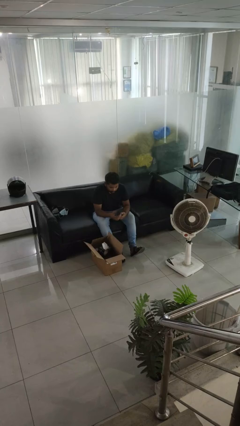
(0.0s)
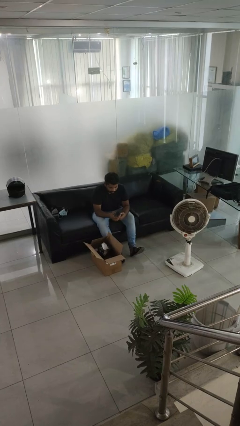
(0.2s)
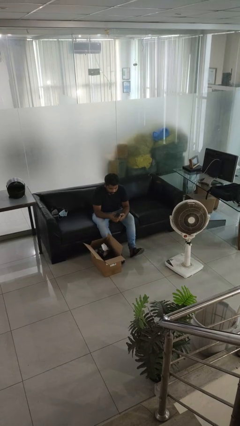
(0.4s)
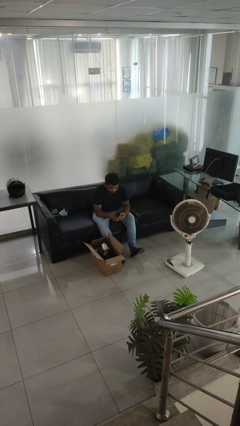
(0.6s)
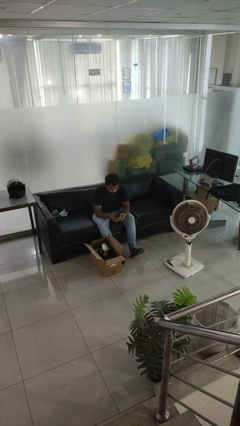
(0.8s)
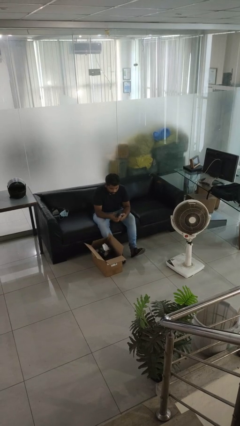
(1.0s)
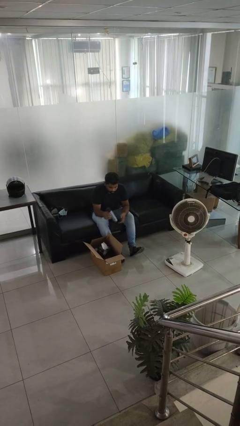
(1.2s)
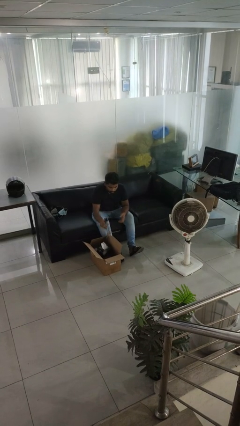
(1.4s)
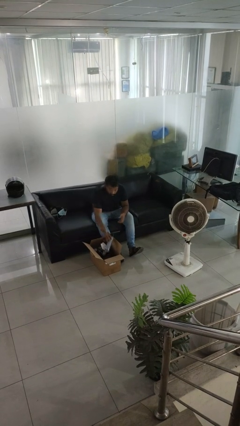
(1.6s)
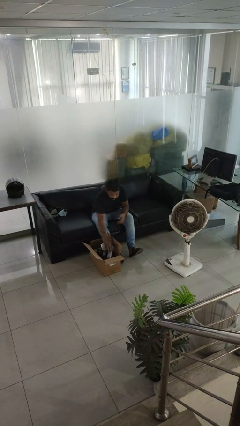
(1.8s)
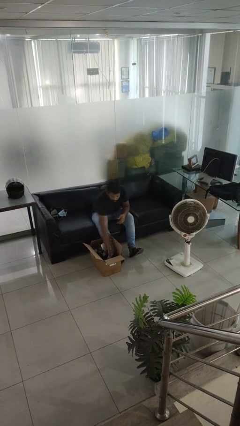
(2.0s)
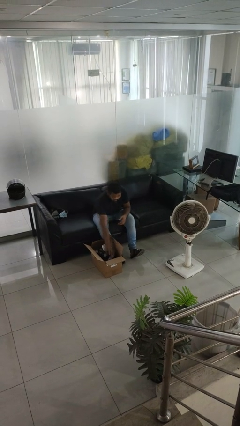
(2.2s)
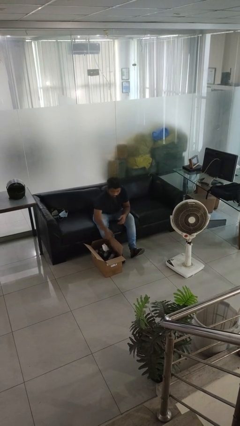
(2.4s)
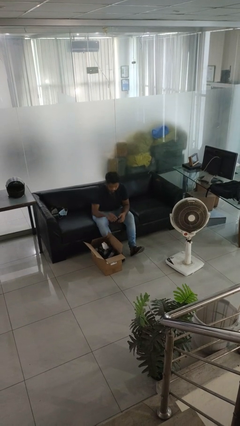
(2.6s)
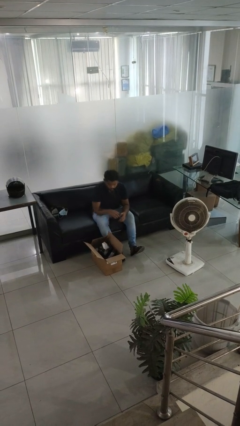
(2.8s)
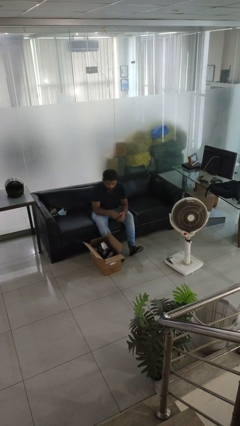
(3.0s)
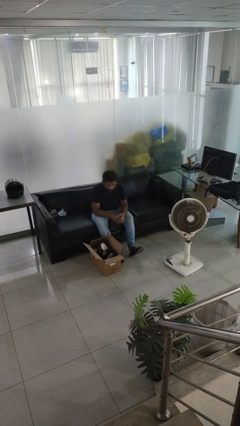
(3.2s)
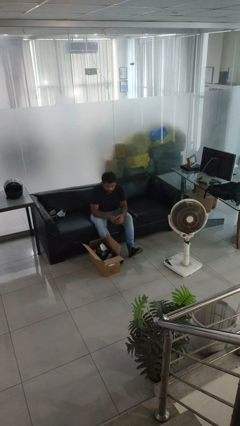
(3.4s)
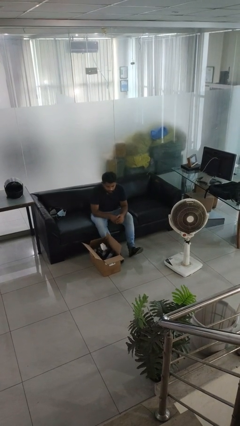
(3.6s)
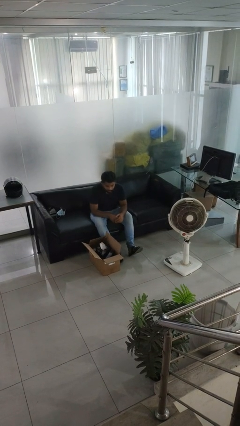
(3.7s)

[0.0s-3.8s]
person puts object into box

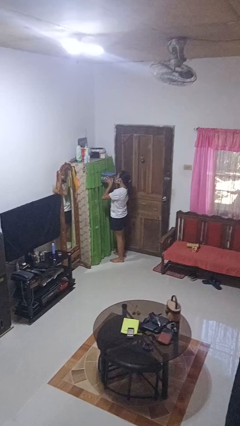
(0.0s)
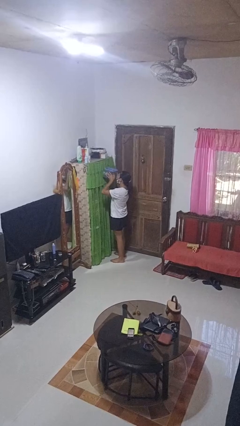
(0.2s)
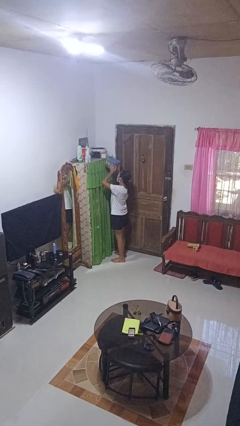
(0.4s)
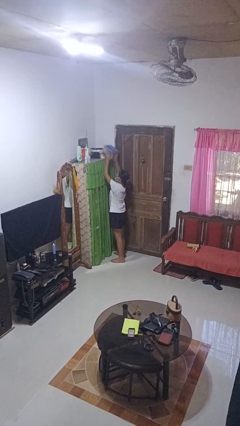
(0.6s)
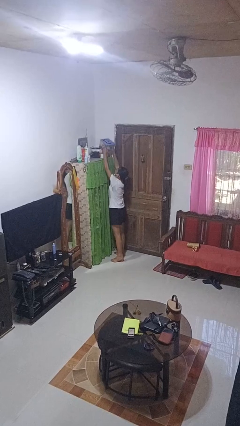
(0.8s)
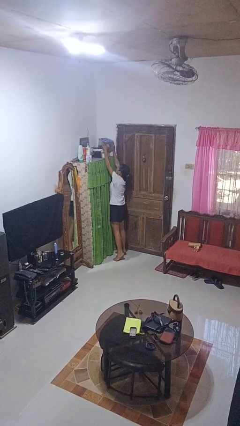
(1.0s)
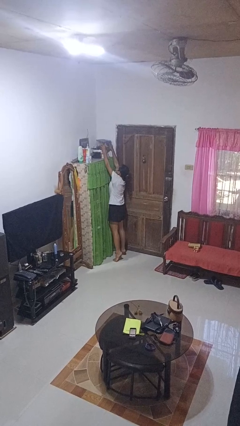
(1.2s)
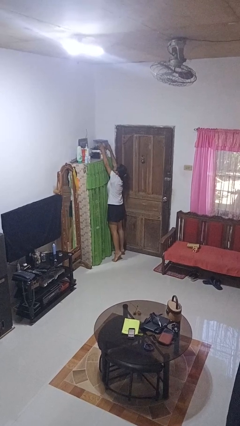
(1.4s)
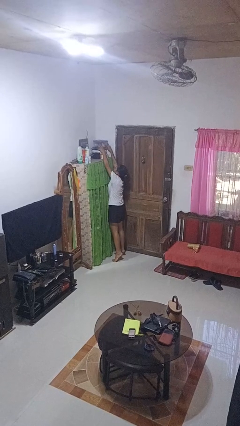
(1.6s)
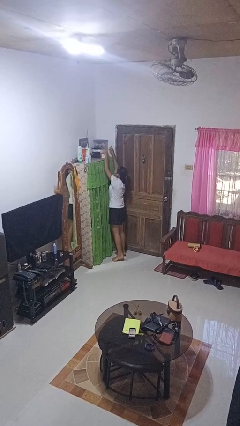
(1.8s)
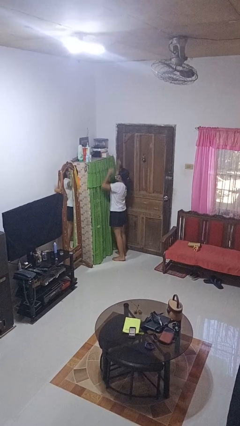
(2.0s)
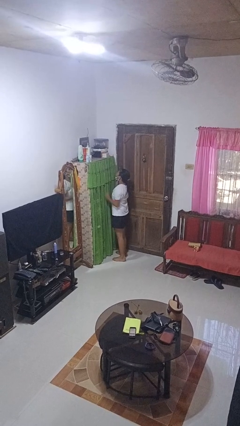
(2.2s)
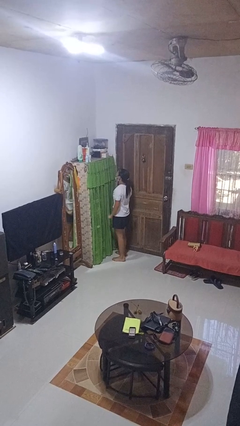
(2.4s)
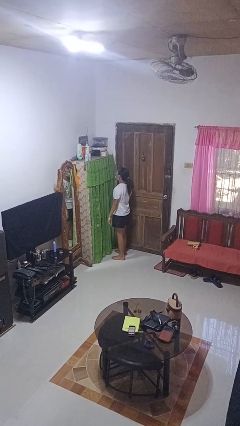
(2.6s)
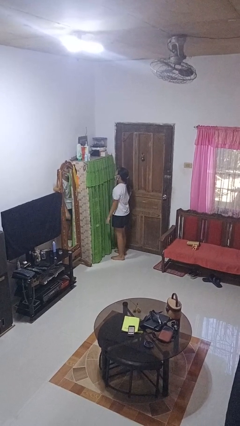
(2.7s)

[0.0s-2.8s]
person puts down object on shelf

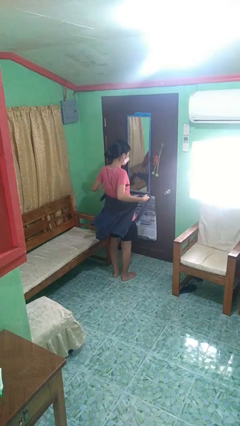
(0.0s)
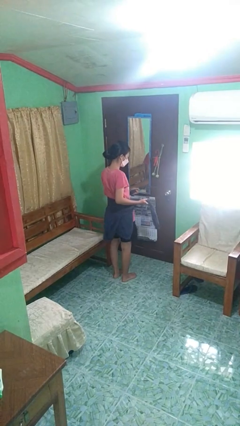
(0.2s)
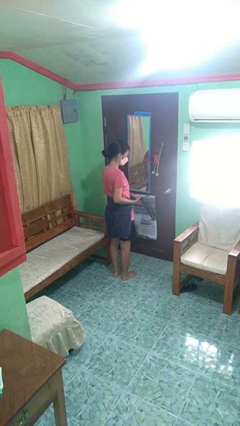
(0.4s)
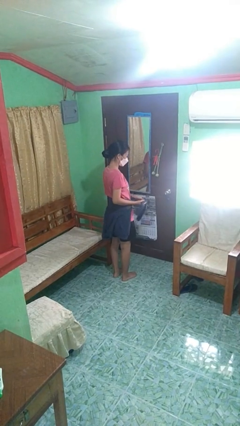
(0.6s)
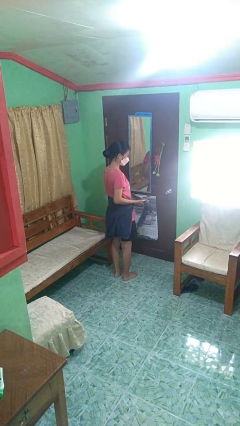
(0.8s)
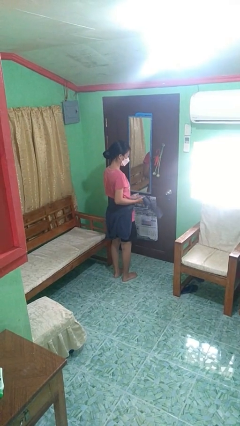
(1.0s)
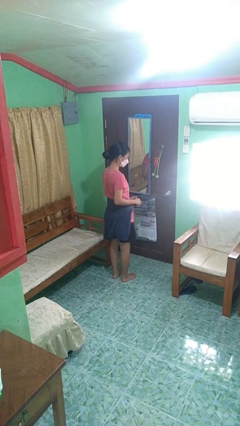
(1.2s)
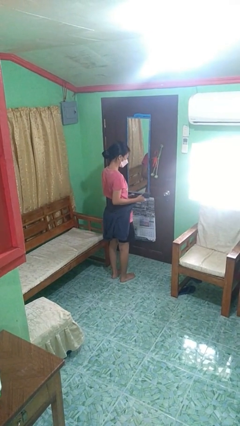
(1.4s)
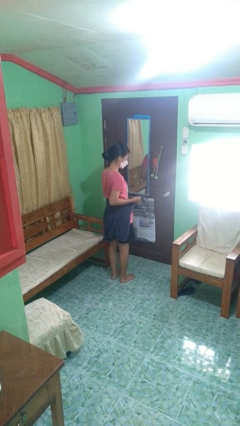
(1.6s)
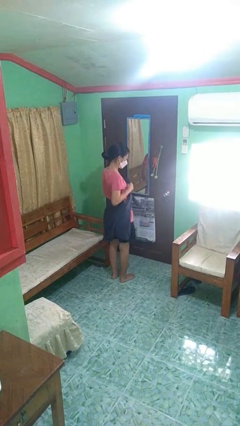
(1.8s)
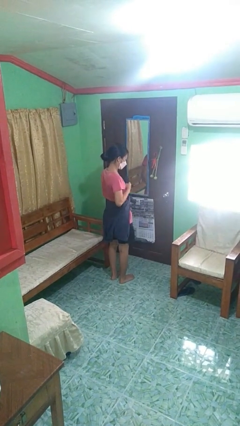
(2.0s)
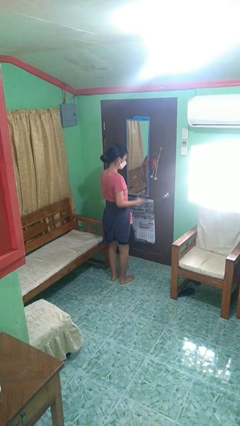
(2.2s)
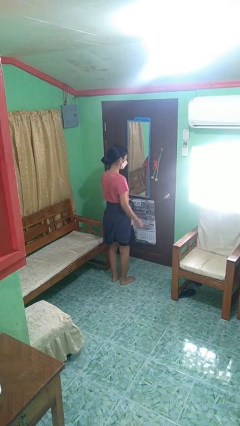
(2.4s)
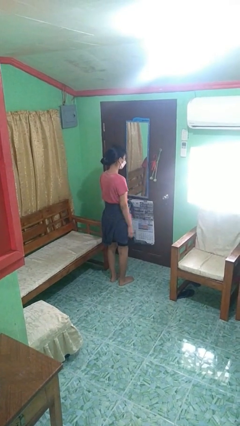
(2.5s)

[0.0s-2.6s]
person ties jacket around waist

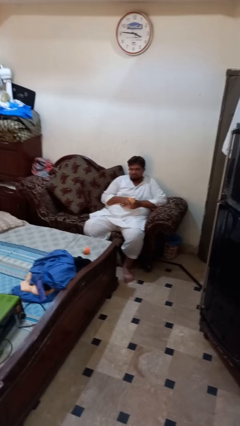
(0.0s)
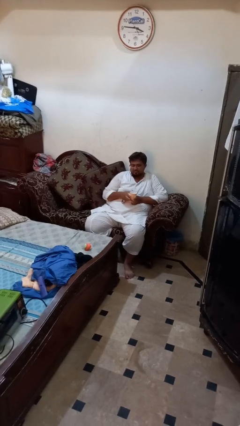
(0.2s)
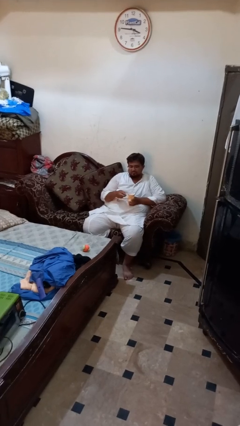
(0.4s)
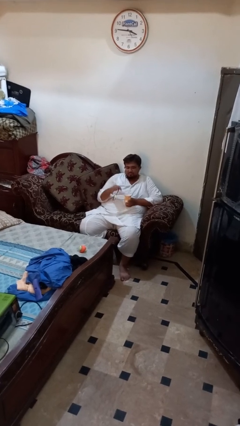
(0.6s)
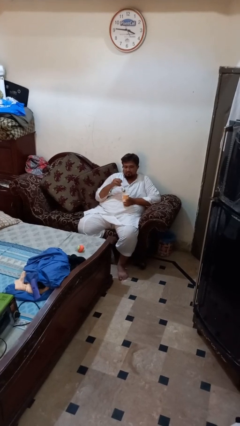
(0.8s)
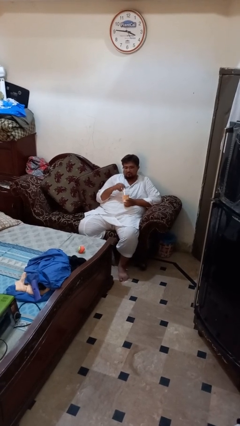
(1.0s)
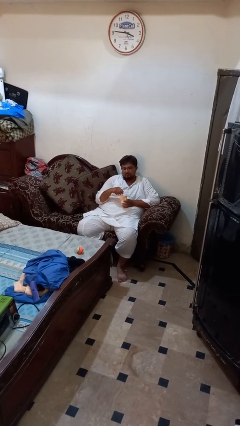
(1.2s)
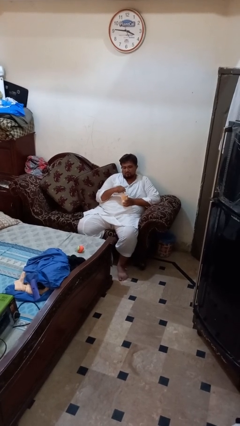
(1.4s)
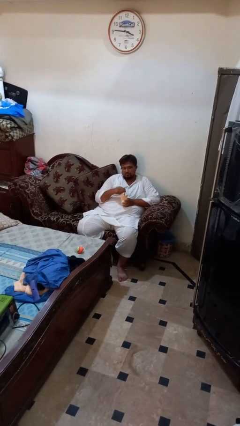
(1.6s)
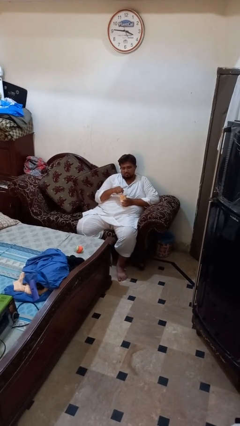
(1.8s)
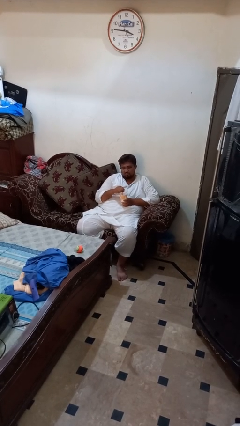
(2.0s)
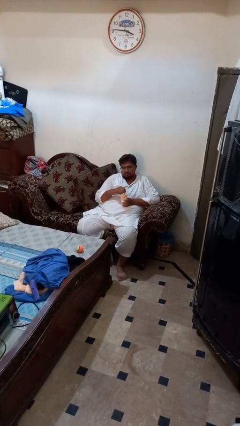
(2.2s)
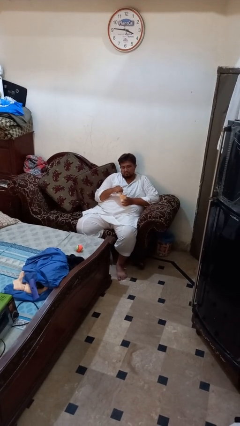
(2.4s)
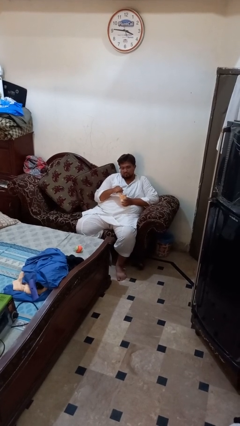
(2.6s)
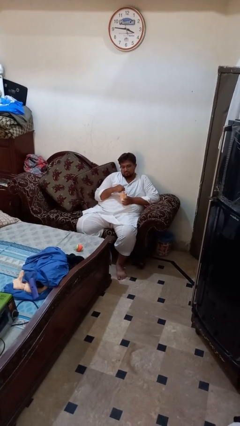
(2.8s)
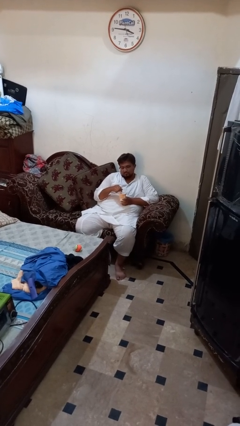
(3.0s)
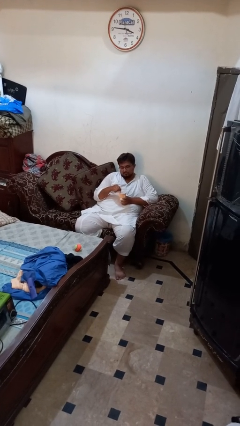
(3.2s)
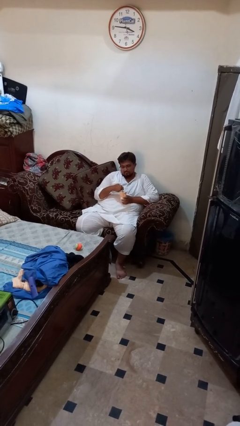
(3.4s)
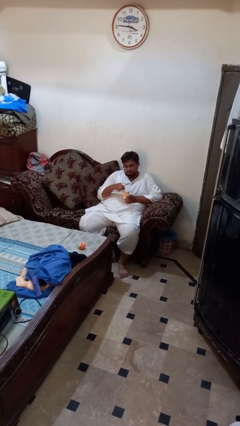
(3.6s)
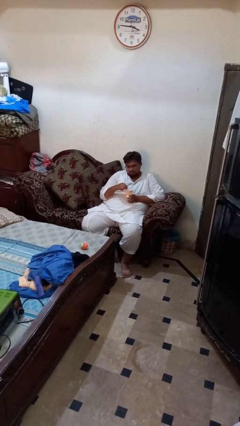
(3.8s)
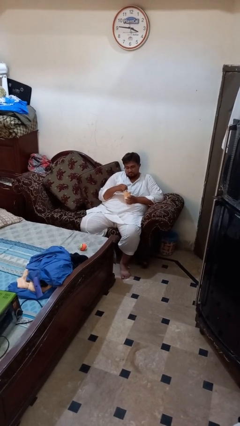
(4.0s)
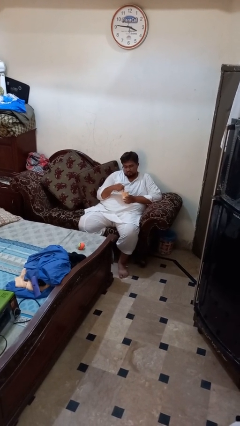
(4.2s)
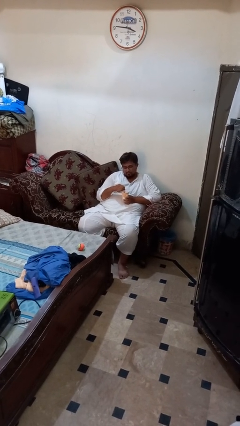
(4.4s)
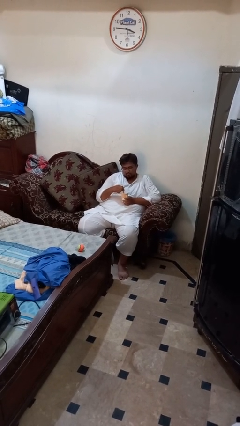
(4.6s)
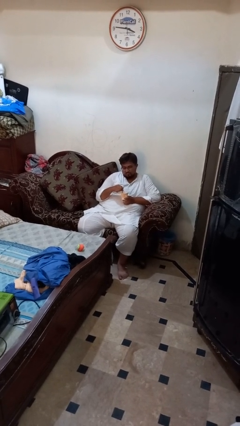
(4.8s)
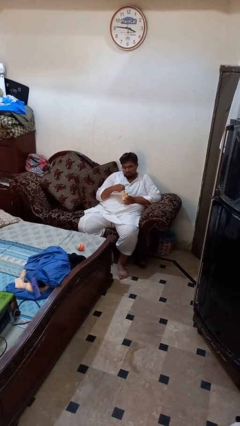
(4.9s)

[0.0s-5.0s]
person stirs mug

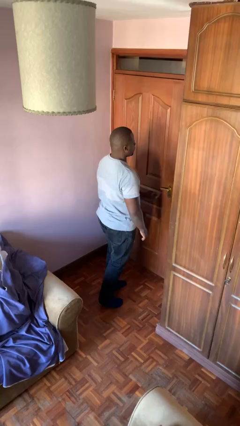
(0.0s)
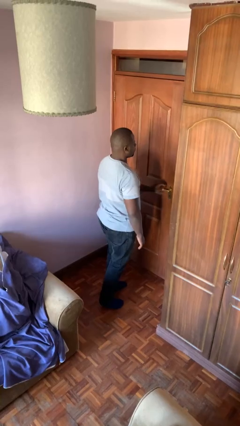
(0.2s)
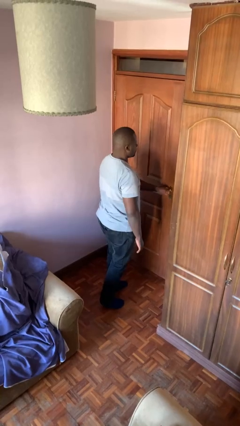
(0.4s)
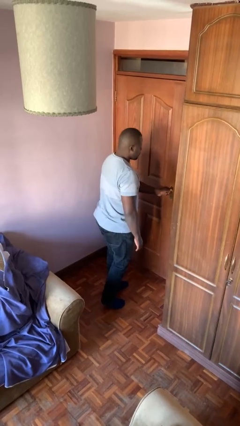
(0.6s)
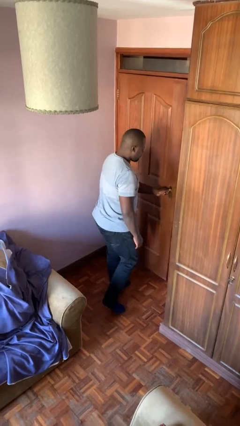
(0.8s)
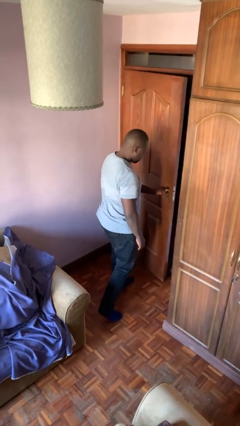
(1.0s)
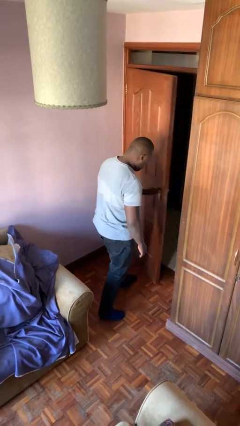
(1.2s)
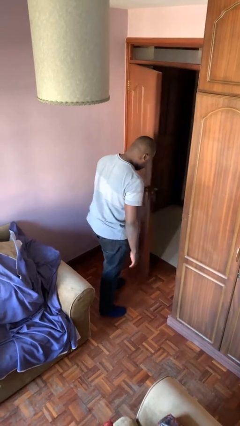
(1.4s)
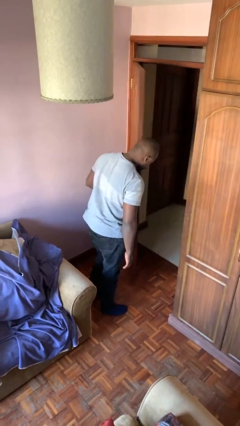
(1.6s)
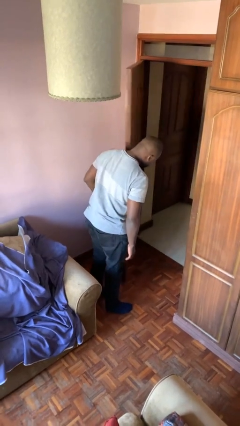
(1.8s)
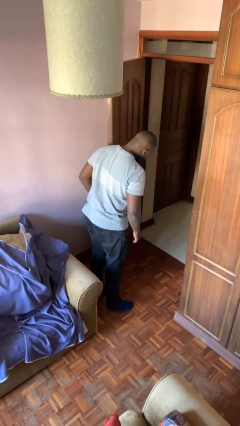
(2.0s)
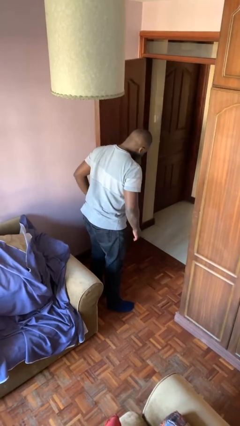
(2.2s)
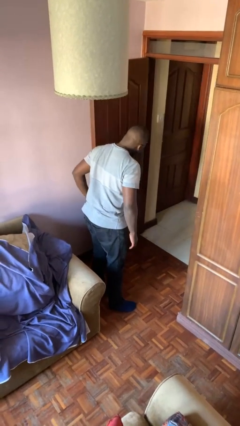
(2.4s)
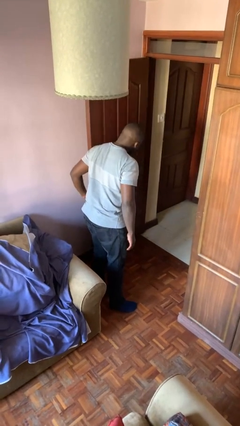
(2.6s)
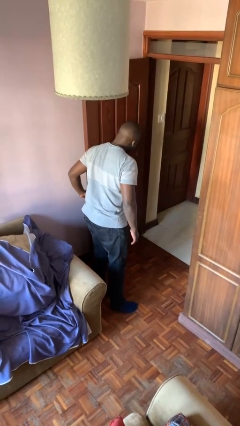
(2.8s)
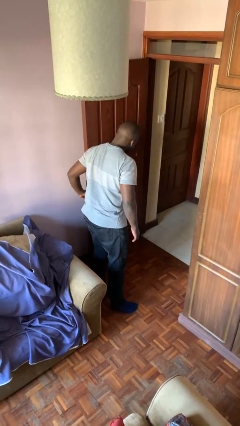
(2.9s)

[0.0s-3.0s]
person opens facility door

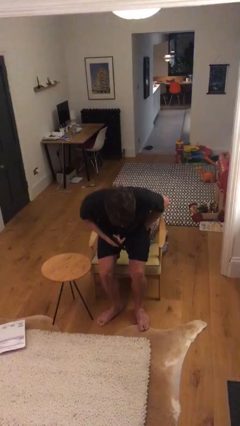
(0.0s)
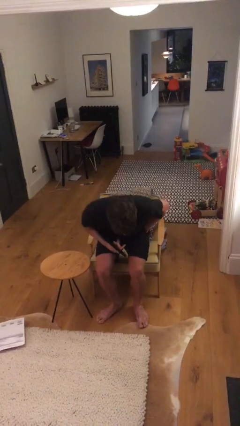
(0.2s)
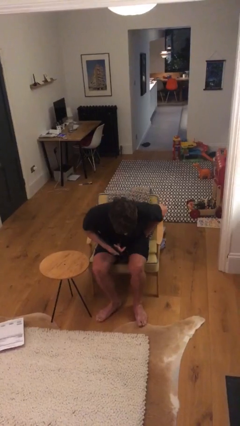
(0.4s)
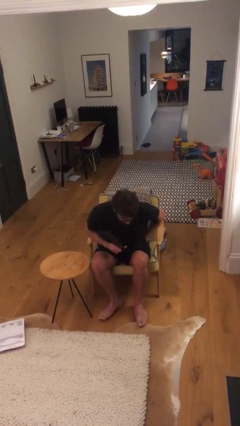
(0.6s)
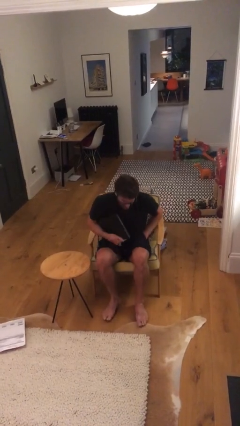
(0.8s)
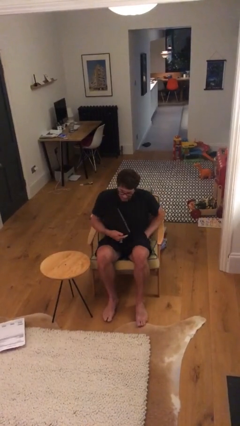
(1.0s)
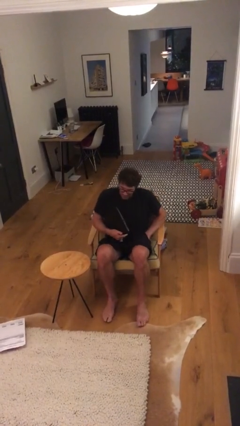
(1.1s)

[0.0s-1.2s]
person sits down
